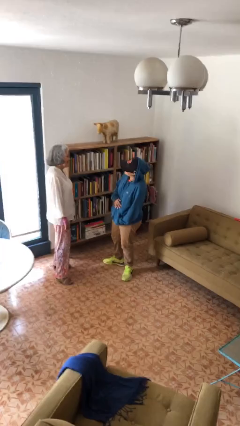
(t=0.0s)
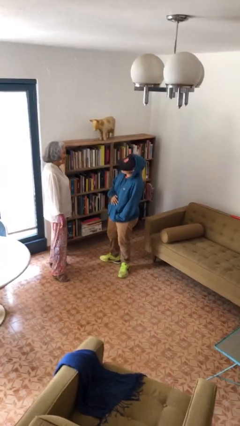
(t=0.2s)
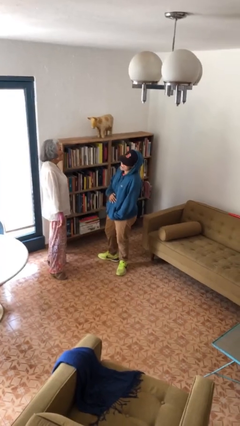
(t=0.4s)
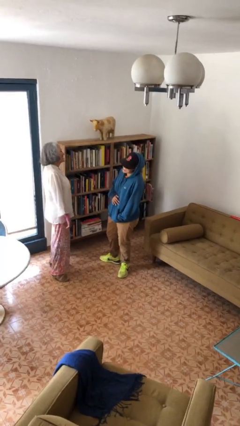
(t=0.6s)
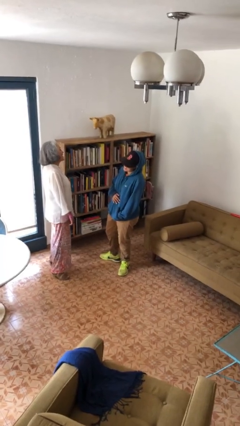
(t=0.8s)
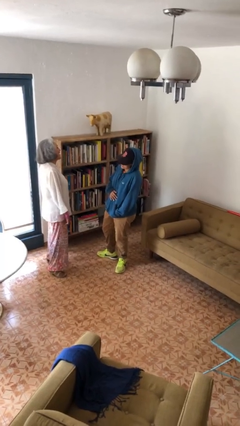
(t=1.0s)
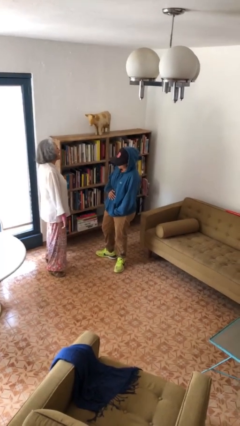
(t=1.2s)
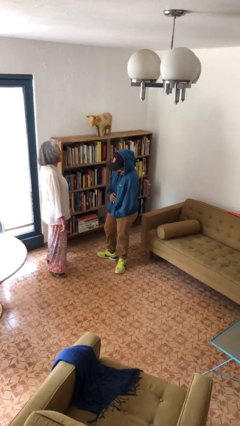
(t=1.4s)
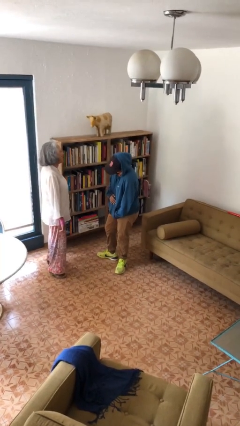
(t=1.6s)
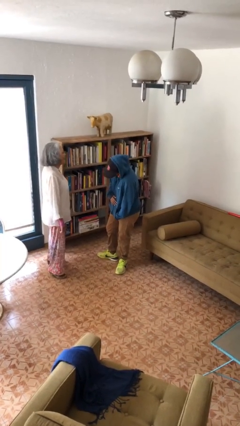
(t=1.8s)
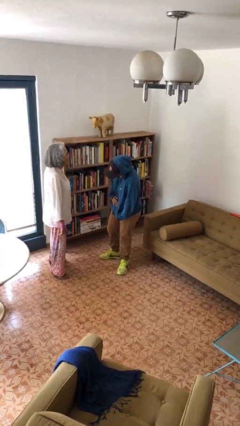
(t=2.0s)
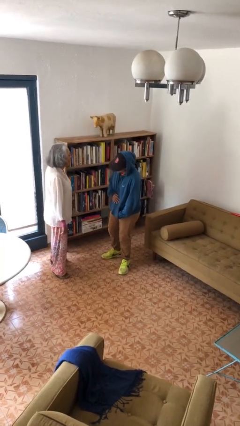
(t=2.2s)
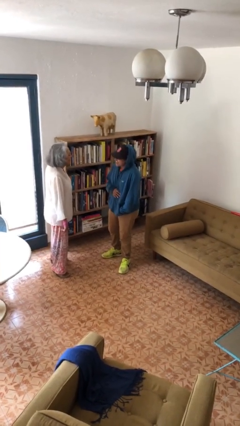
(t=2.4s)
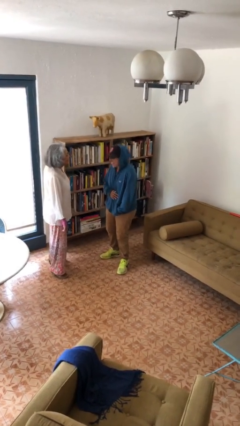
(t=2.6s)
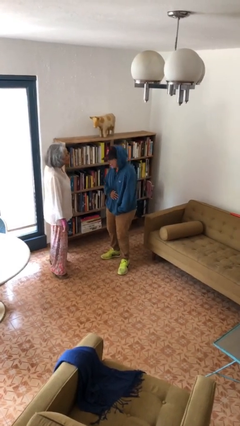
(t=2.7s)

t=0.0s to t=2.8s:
person laughs with person

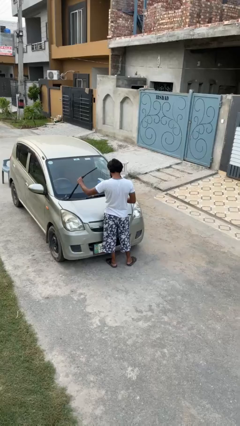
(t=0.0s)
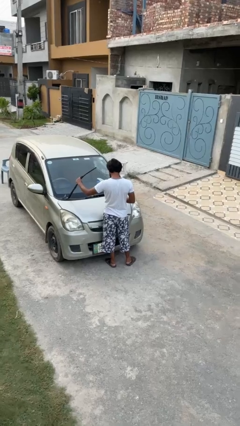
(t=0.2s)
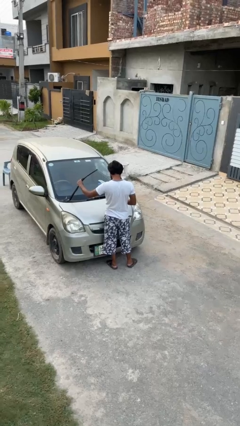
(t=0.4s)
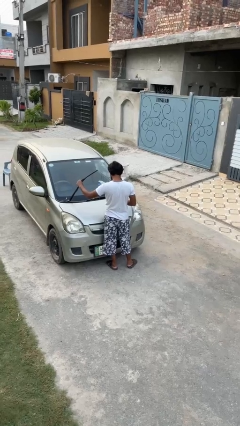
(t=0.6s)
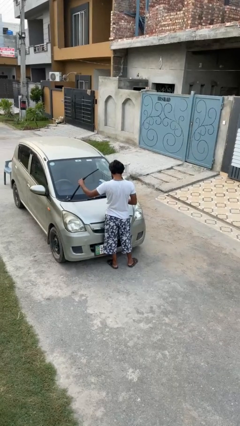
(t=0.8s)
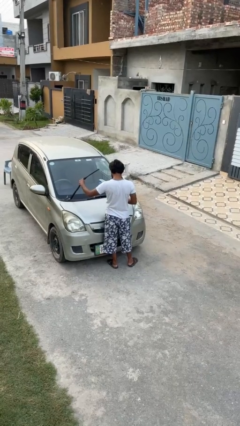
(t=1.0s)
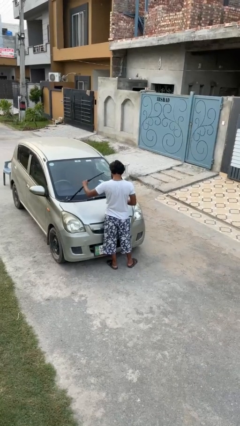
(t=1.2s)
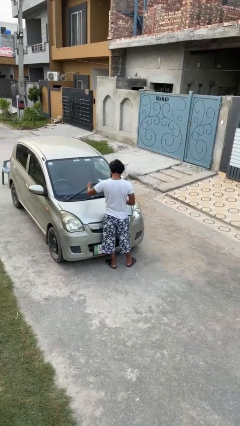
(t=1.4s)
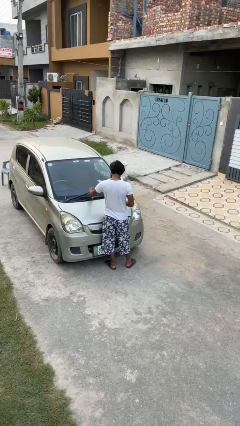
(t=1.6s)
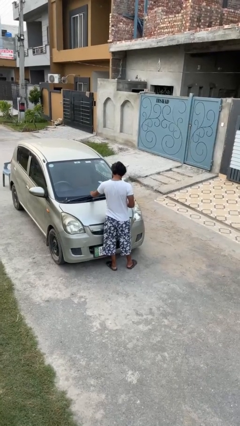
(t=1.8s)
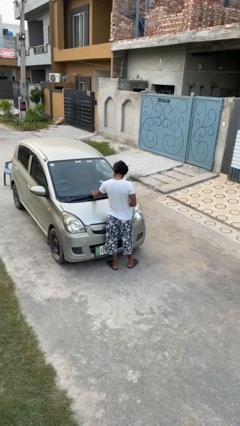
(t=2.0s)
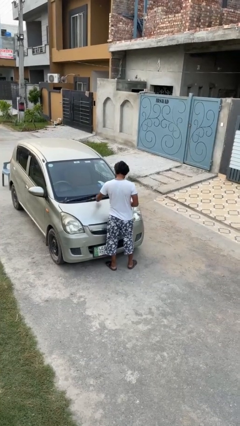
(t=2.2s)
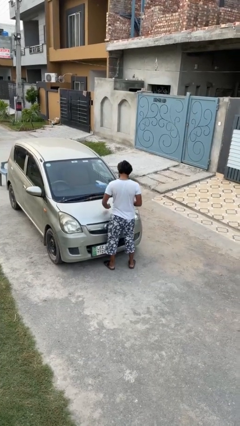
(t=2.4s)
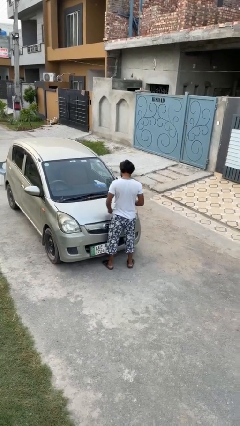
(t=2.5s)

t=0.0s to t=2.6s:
person flips down car wipers

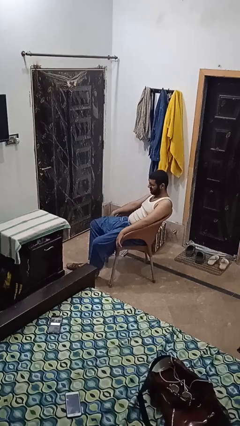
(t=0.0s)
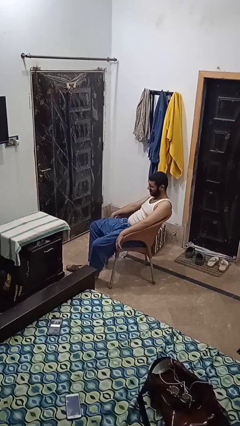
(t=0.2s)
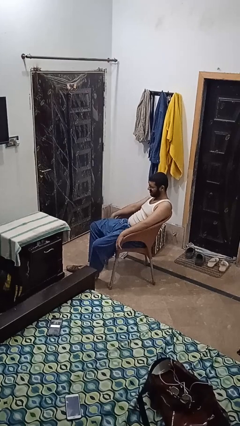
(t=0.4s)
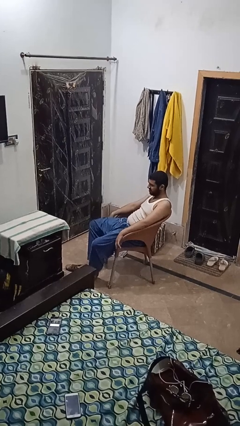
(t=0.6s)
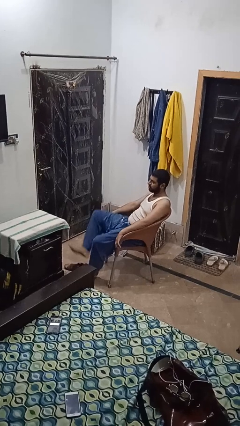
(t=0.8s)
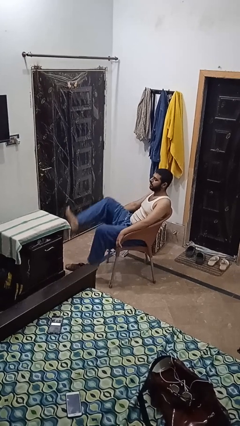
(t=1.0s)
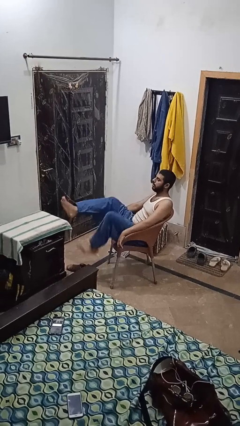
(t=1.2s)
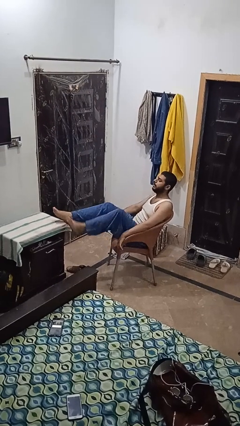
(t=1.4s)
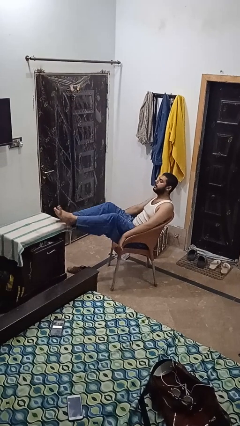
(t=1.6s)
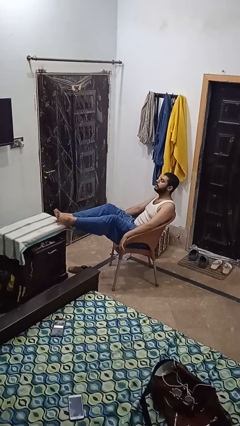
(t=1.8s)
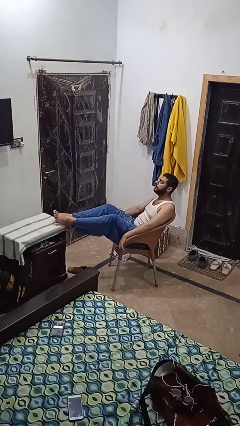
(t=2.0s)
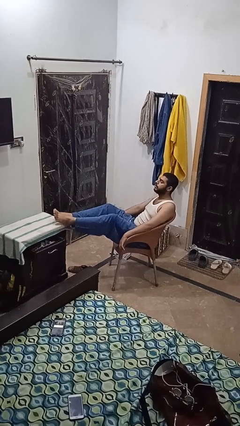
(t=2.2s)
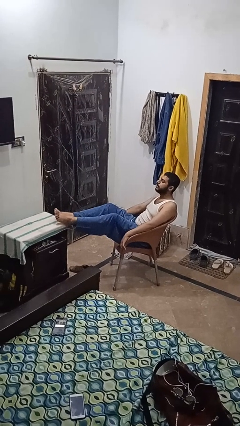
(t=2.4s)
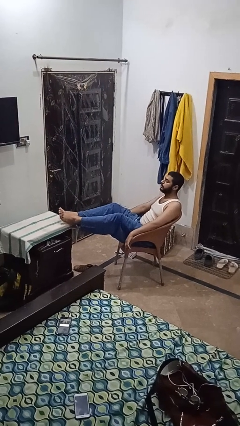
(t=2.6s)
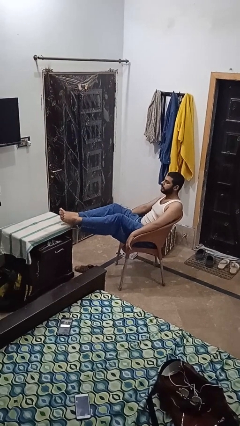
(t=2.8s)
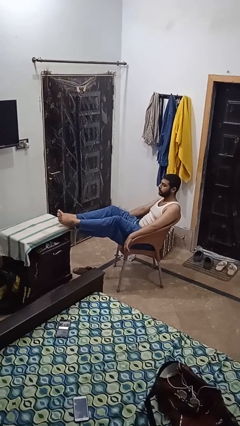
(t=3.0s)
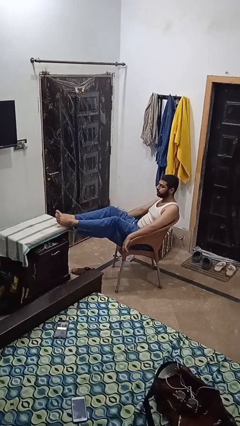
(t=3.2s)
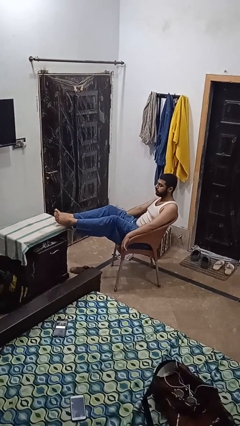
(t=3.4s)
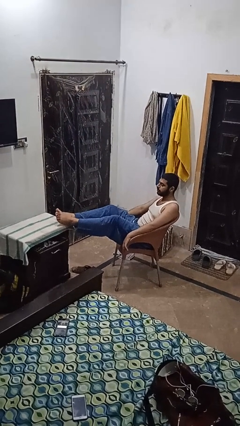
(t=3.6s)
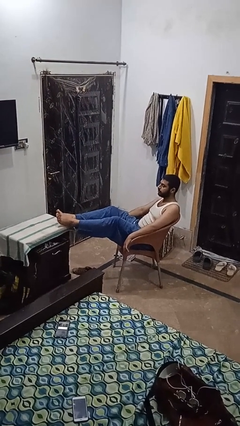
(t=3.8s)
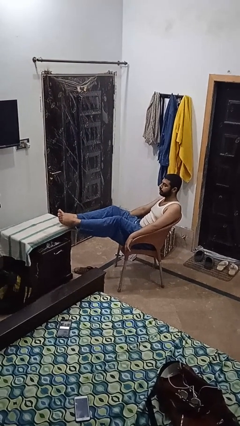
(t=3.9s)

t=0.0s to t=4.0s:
person puts feet up

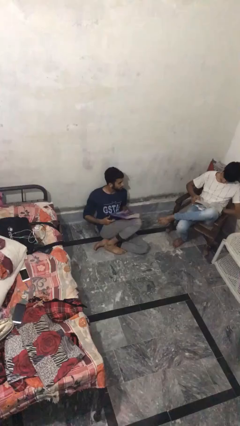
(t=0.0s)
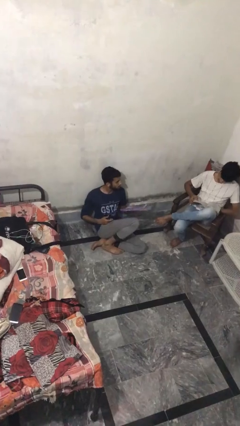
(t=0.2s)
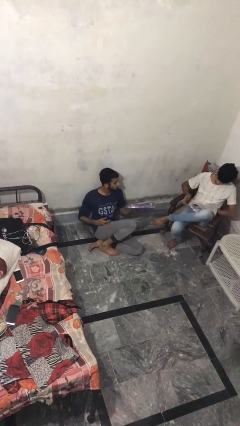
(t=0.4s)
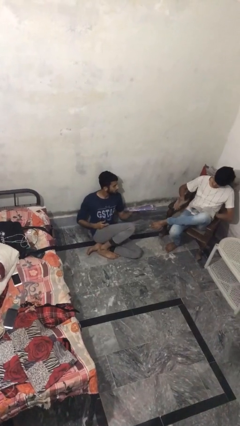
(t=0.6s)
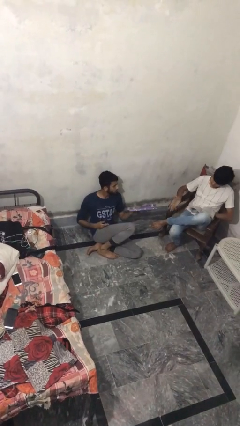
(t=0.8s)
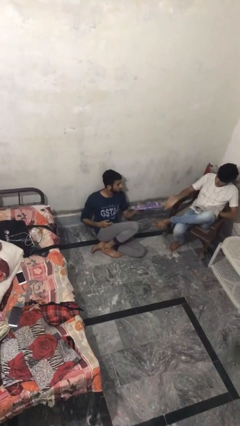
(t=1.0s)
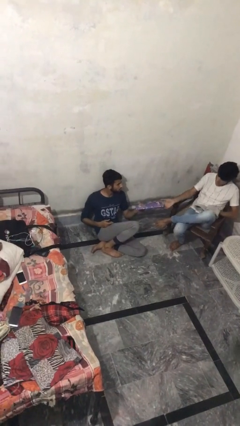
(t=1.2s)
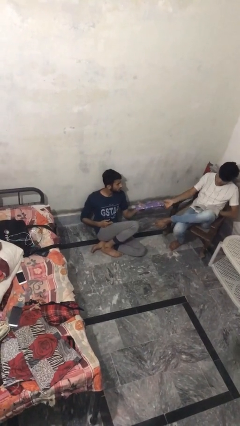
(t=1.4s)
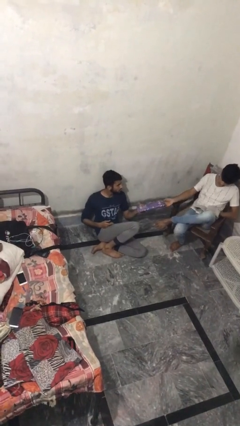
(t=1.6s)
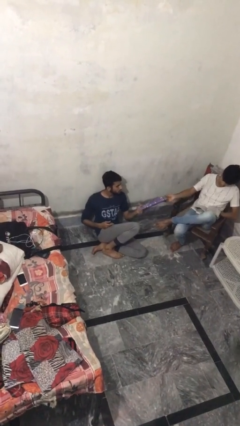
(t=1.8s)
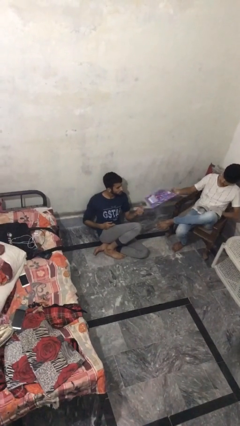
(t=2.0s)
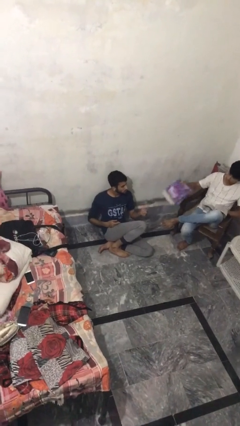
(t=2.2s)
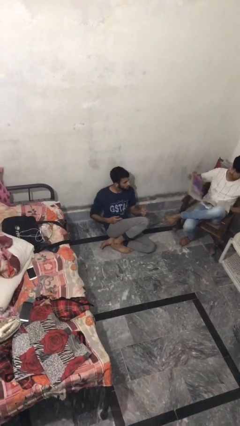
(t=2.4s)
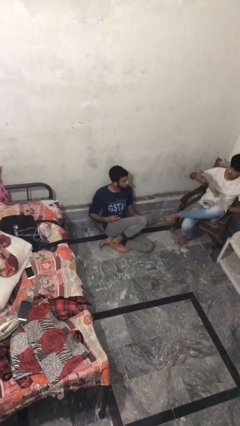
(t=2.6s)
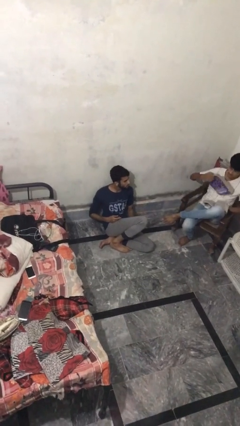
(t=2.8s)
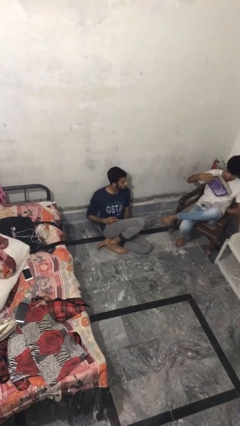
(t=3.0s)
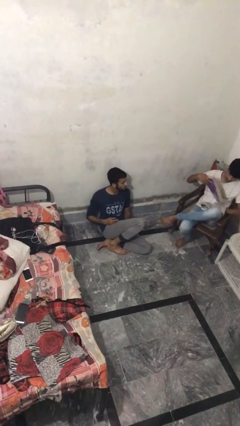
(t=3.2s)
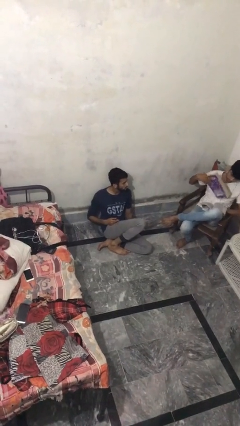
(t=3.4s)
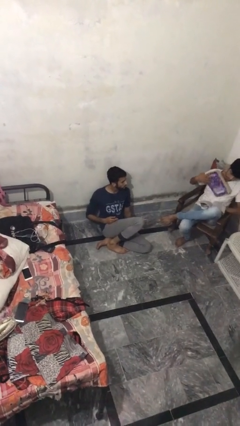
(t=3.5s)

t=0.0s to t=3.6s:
person transfers object to person

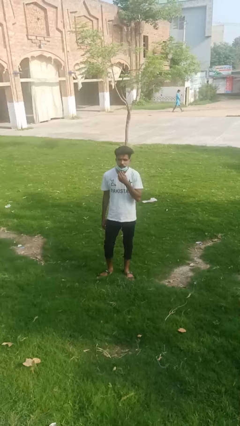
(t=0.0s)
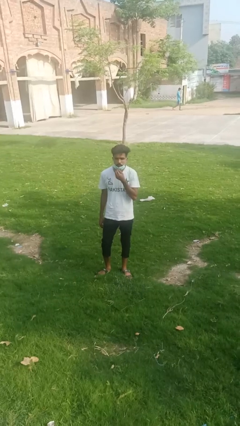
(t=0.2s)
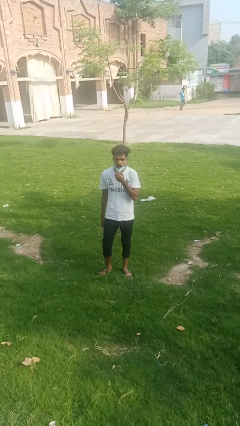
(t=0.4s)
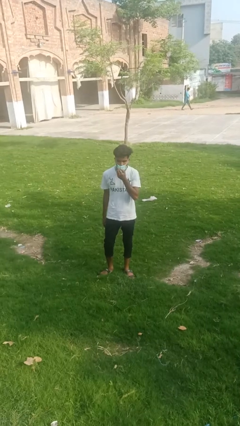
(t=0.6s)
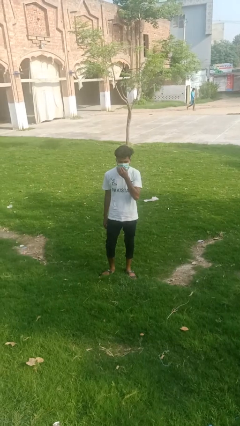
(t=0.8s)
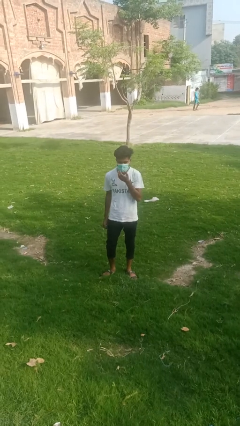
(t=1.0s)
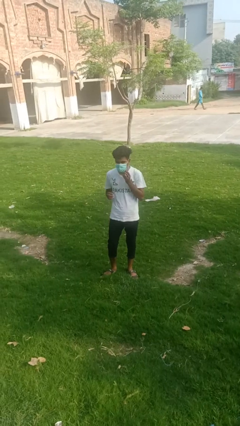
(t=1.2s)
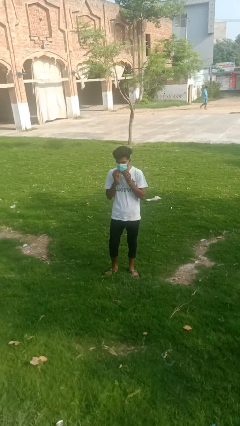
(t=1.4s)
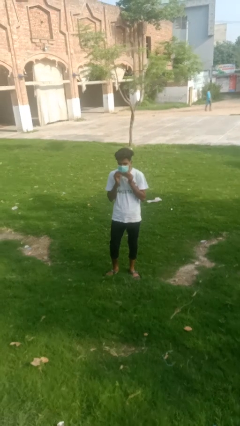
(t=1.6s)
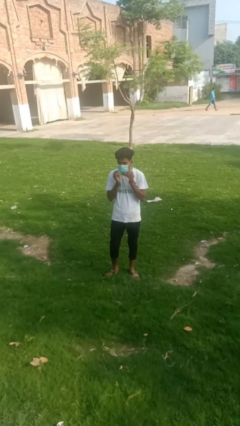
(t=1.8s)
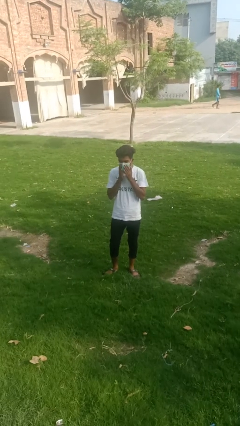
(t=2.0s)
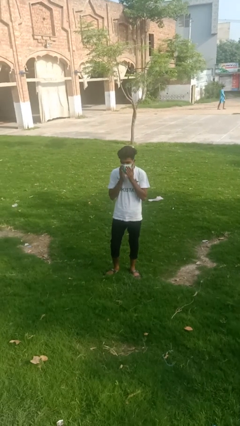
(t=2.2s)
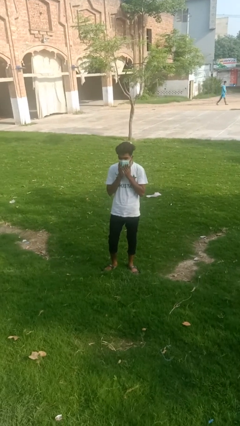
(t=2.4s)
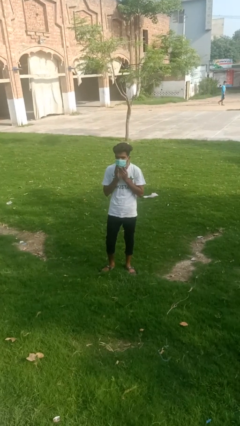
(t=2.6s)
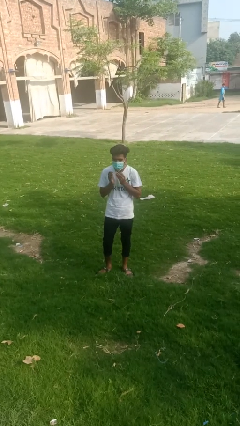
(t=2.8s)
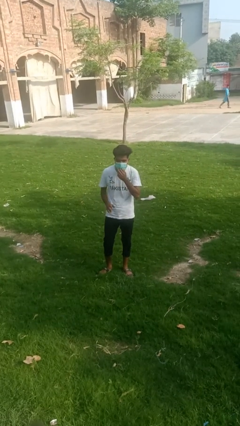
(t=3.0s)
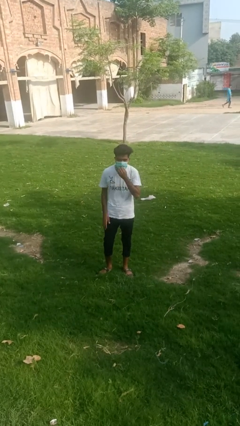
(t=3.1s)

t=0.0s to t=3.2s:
person puts on facemask

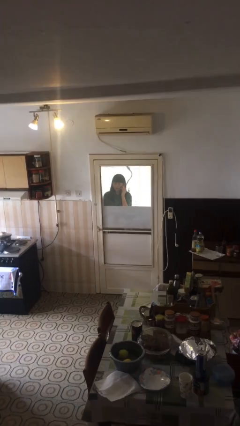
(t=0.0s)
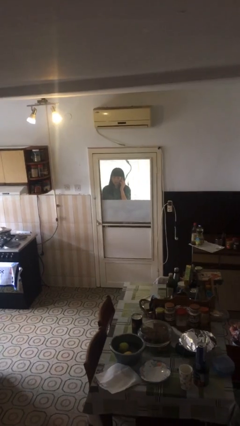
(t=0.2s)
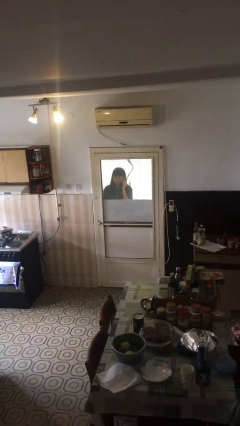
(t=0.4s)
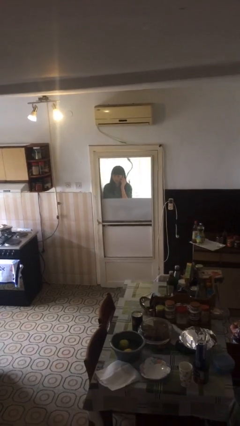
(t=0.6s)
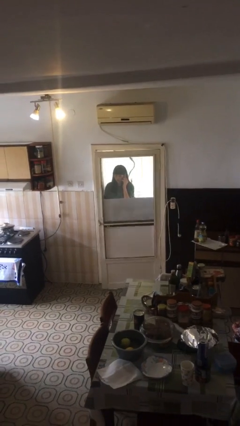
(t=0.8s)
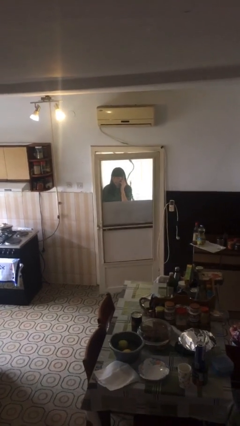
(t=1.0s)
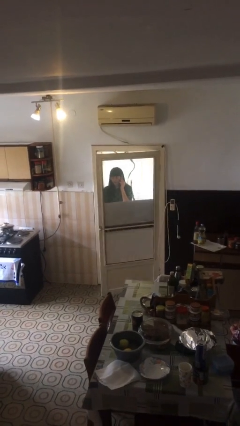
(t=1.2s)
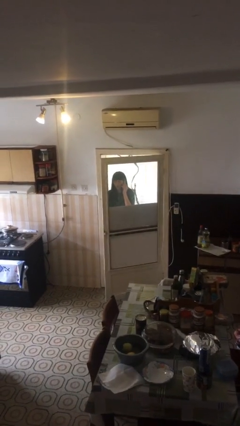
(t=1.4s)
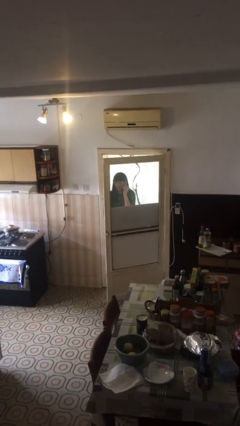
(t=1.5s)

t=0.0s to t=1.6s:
person opens facility door
